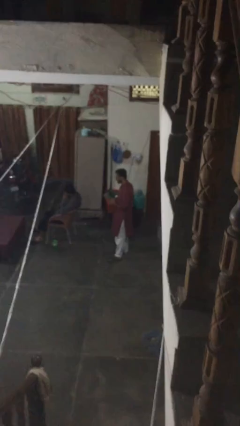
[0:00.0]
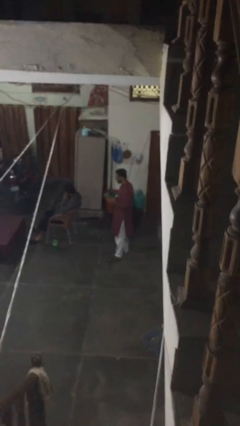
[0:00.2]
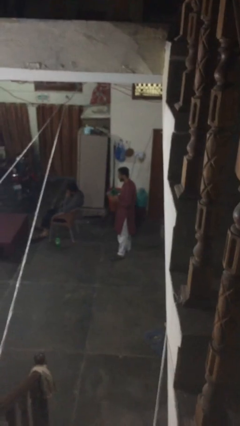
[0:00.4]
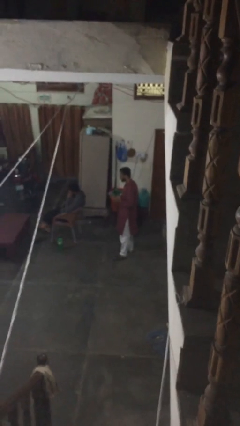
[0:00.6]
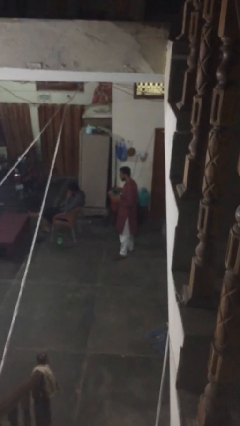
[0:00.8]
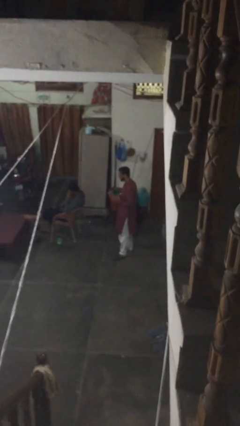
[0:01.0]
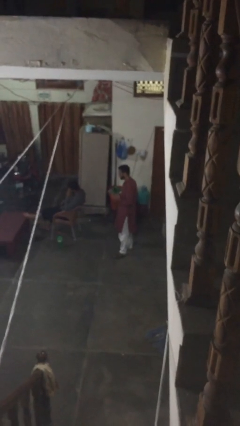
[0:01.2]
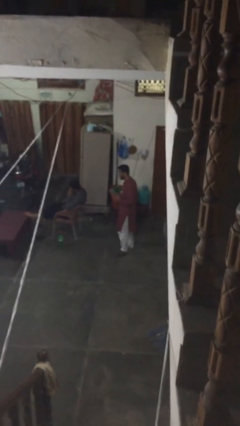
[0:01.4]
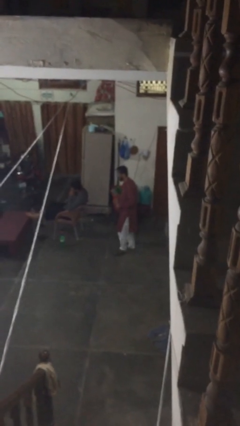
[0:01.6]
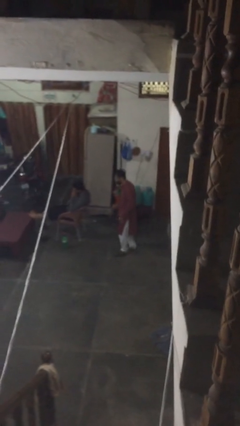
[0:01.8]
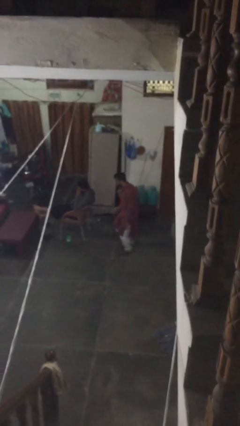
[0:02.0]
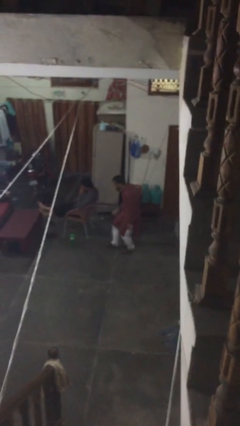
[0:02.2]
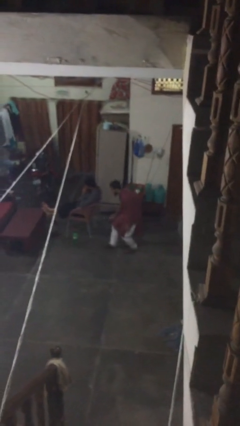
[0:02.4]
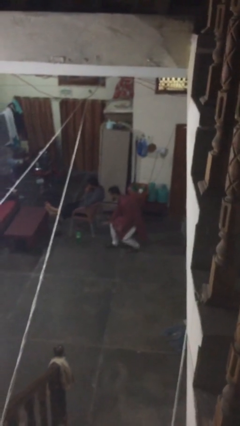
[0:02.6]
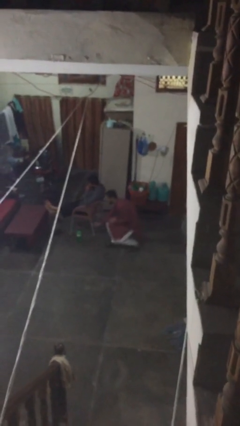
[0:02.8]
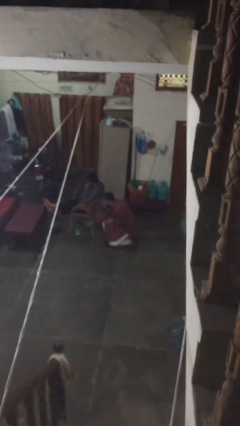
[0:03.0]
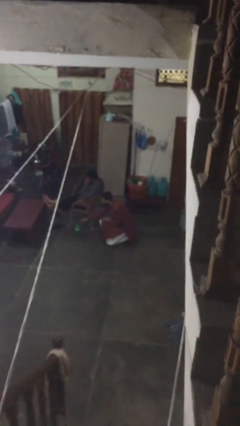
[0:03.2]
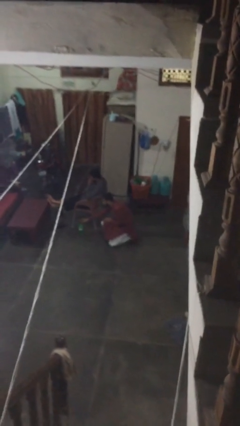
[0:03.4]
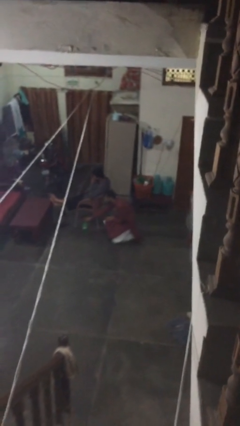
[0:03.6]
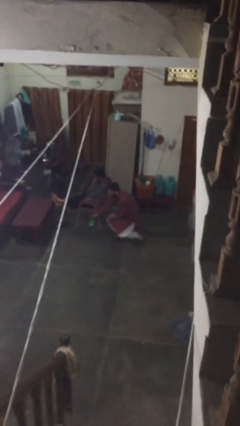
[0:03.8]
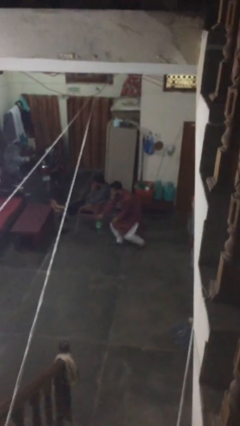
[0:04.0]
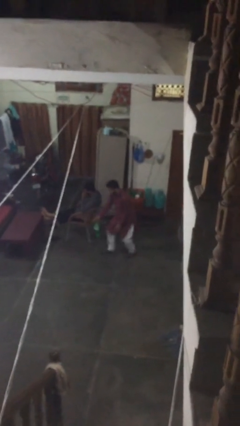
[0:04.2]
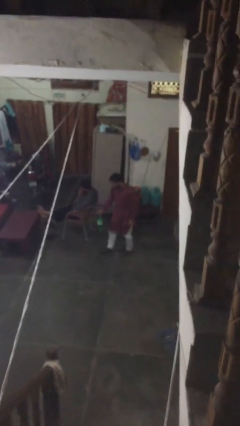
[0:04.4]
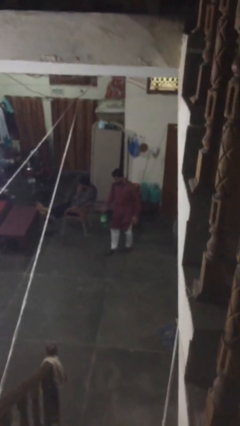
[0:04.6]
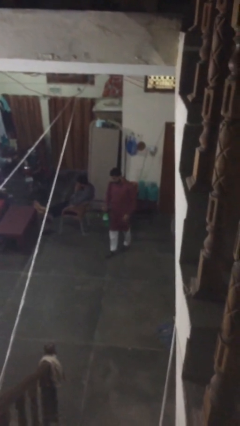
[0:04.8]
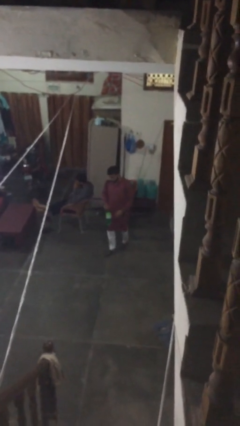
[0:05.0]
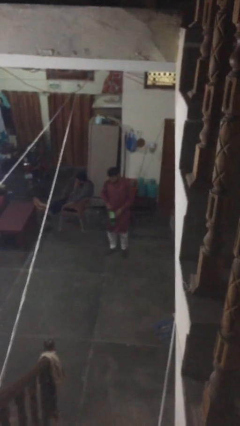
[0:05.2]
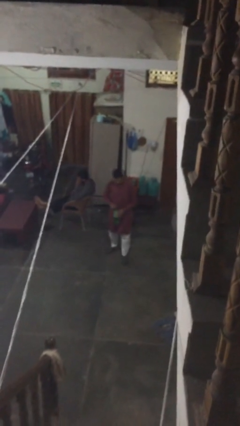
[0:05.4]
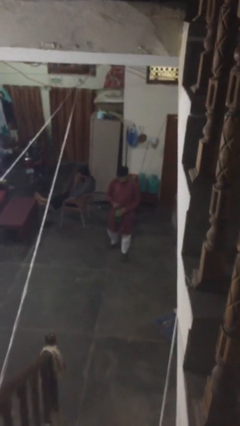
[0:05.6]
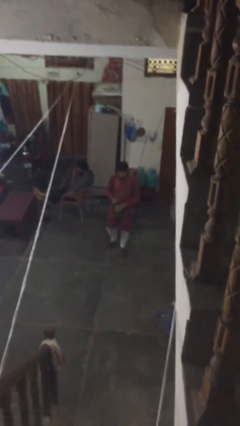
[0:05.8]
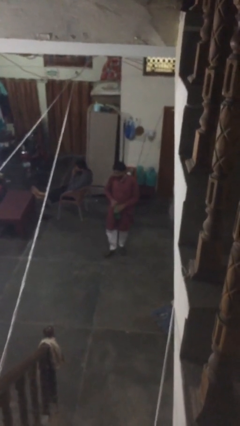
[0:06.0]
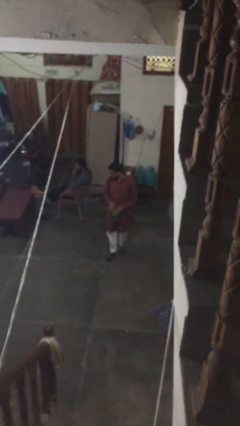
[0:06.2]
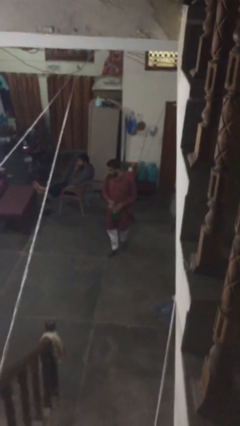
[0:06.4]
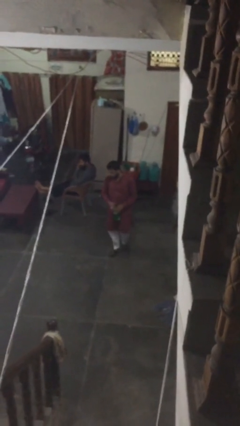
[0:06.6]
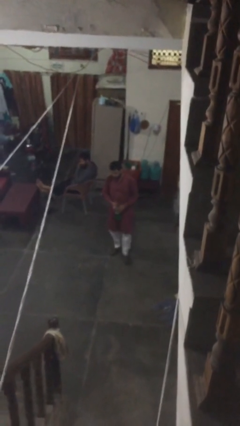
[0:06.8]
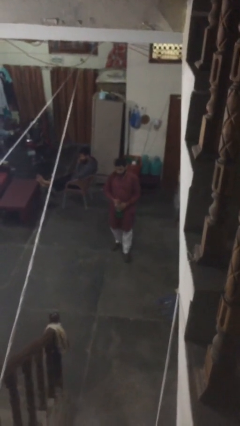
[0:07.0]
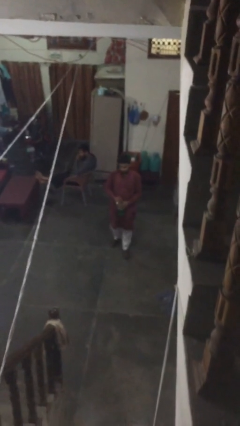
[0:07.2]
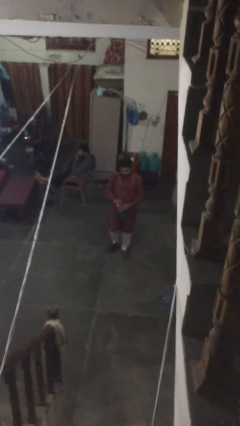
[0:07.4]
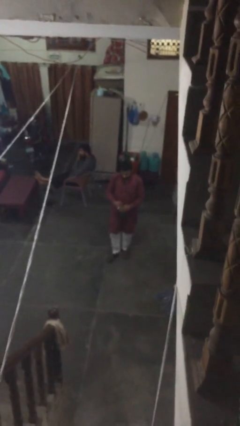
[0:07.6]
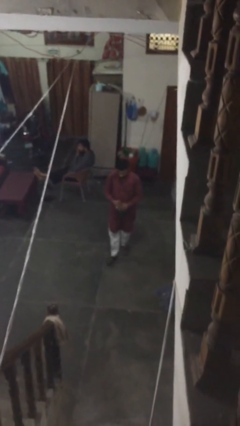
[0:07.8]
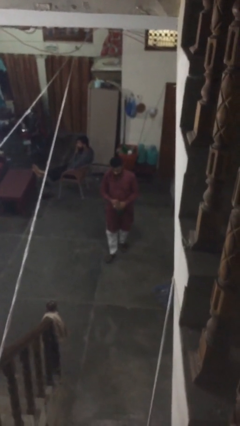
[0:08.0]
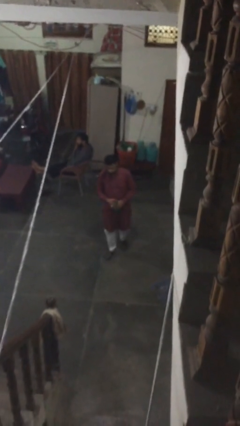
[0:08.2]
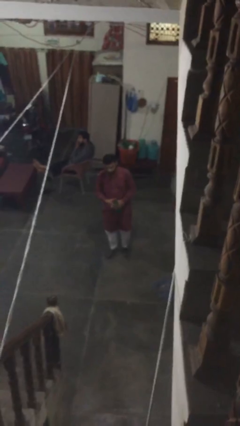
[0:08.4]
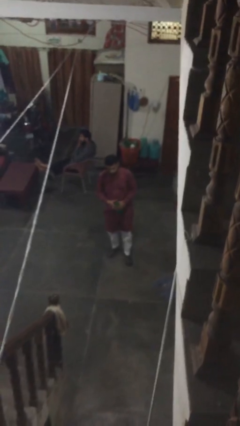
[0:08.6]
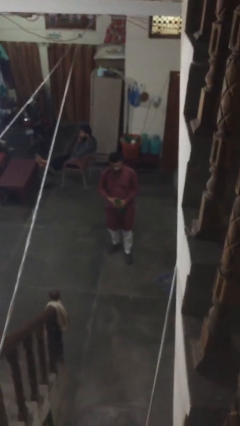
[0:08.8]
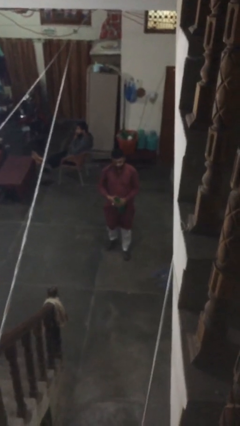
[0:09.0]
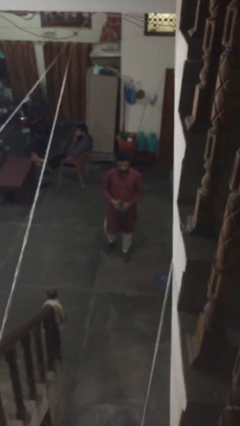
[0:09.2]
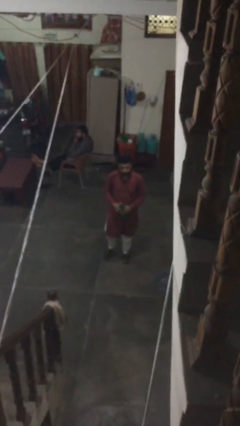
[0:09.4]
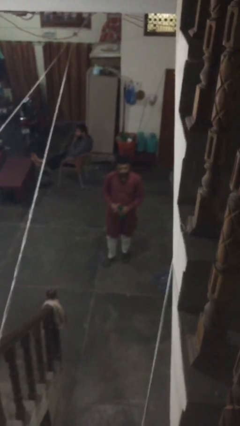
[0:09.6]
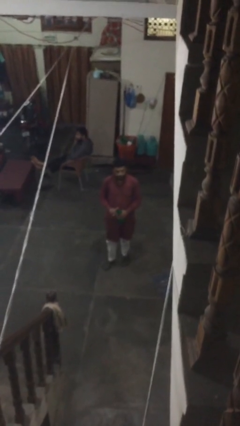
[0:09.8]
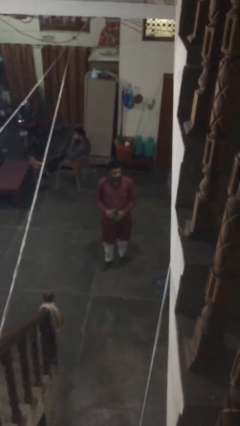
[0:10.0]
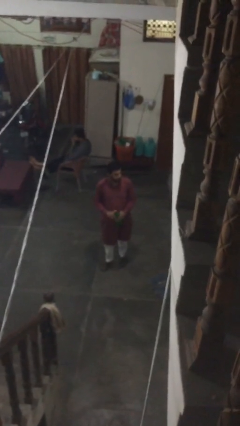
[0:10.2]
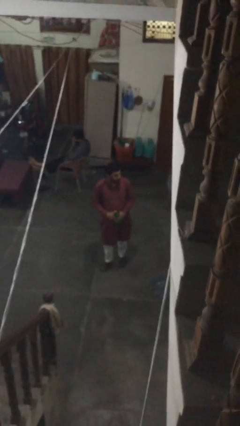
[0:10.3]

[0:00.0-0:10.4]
person steals object from person

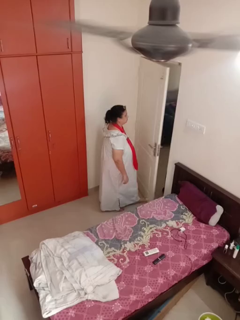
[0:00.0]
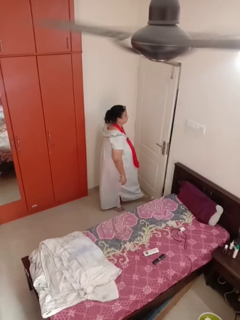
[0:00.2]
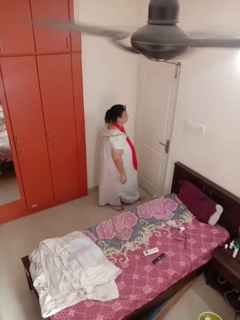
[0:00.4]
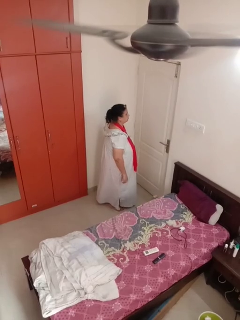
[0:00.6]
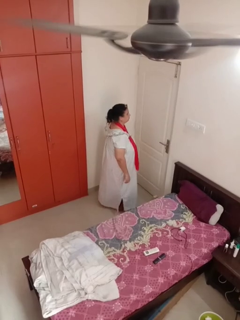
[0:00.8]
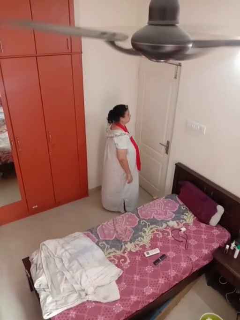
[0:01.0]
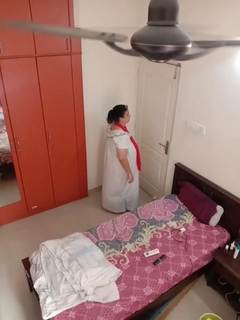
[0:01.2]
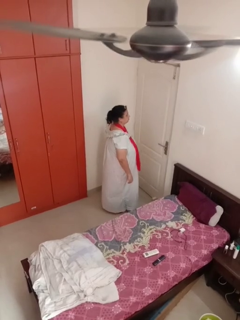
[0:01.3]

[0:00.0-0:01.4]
person closes door with foot

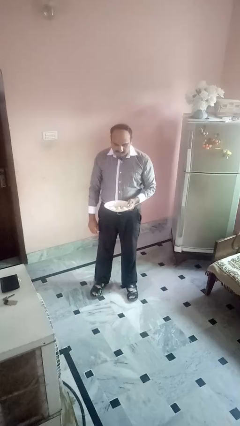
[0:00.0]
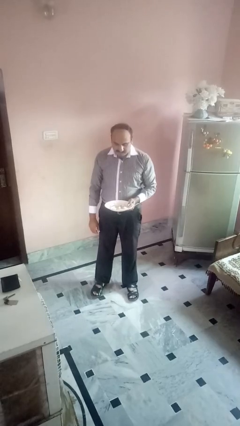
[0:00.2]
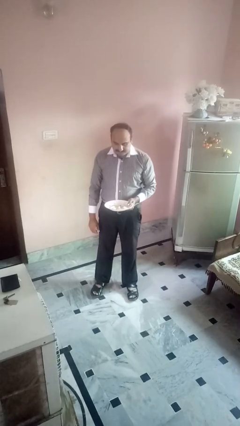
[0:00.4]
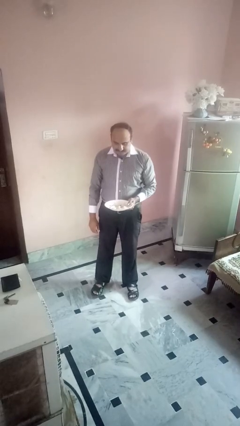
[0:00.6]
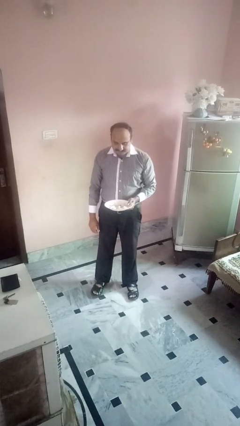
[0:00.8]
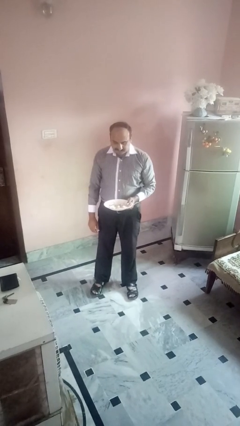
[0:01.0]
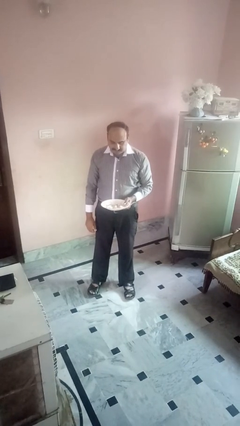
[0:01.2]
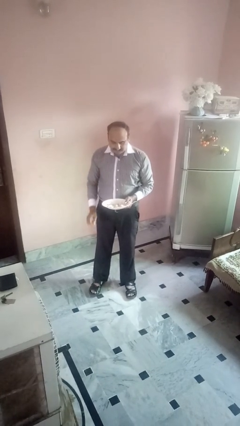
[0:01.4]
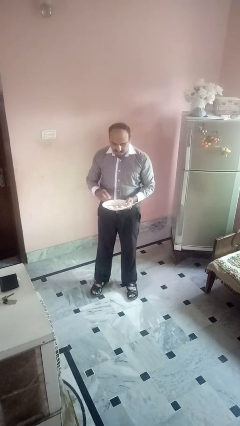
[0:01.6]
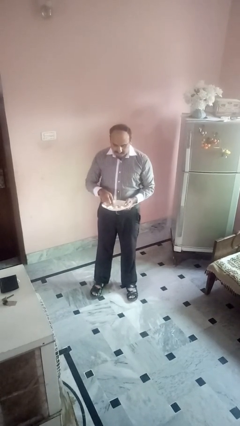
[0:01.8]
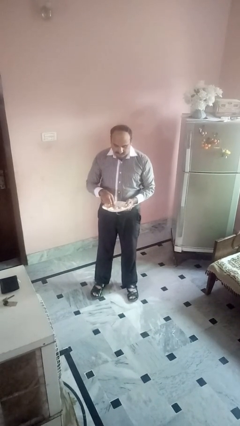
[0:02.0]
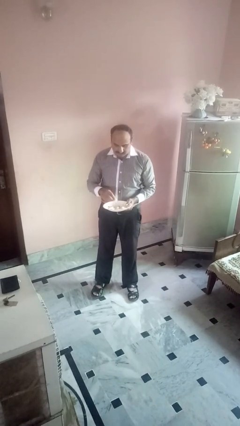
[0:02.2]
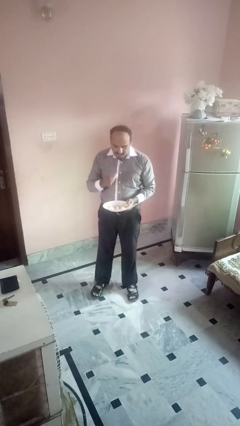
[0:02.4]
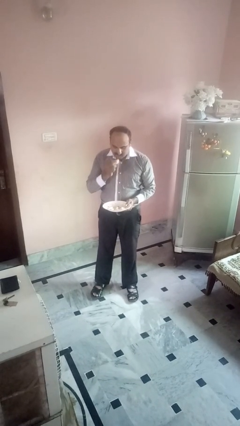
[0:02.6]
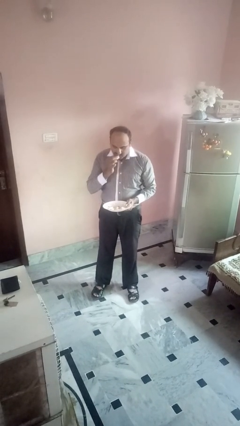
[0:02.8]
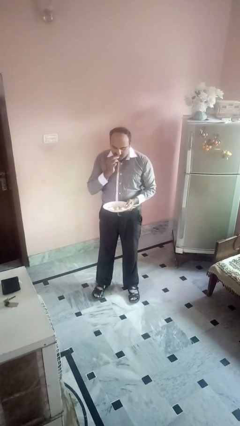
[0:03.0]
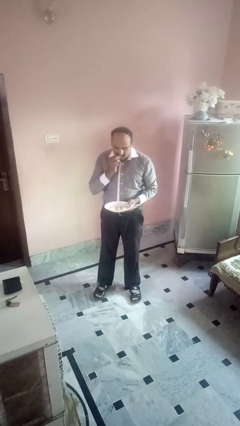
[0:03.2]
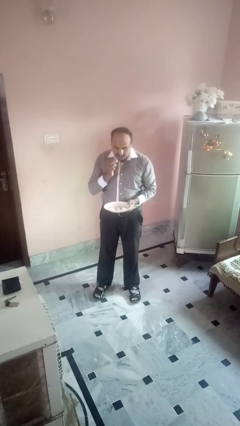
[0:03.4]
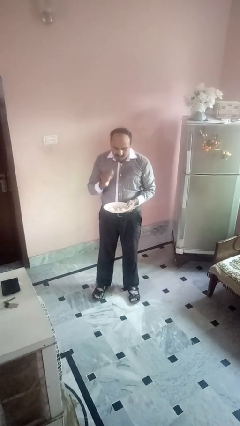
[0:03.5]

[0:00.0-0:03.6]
person eats with hands

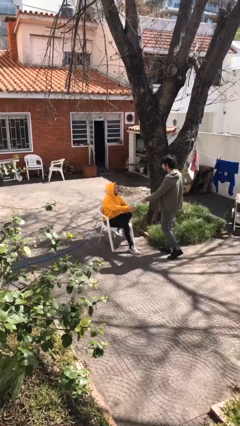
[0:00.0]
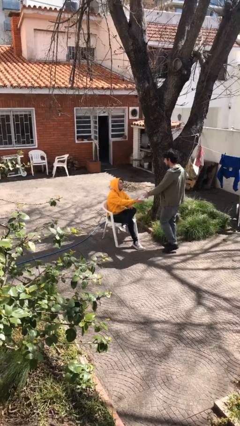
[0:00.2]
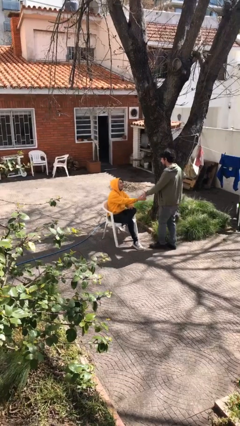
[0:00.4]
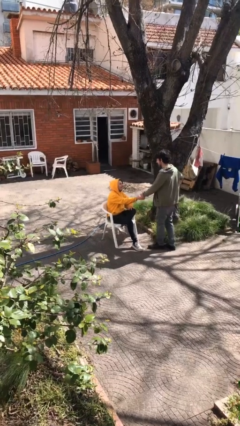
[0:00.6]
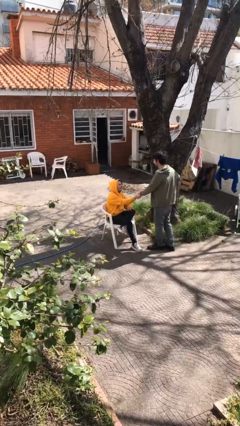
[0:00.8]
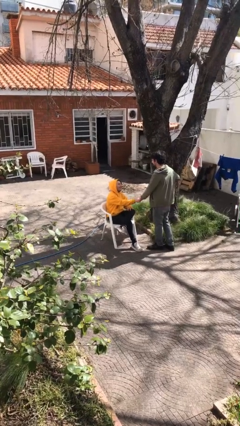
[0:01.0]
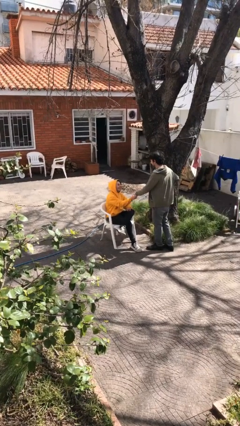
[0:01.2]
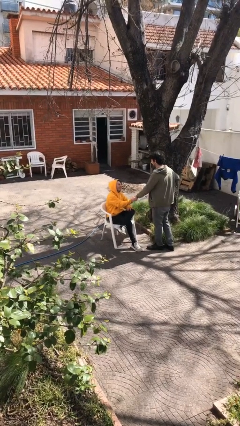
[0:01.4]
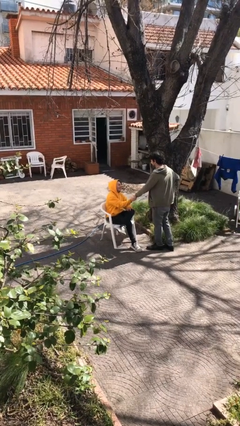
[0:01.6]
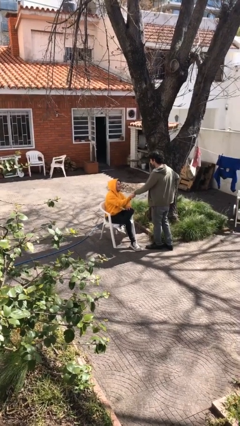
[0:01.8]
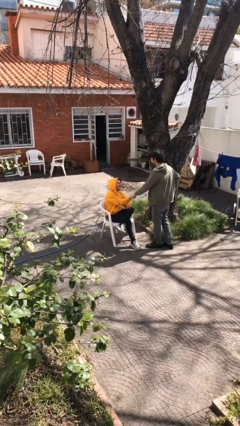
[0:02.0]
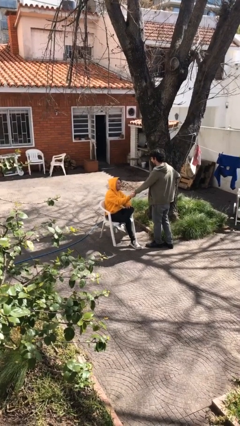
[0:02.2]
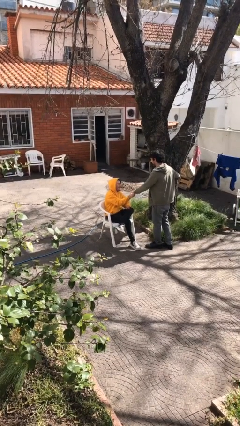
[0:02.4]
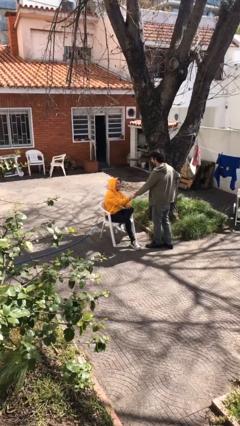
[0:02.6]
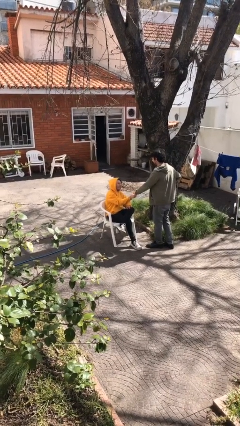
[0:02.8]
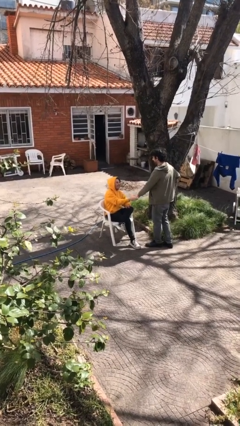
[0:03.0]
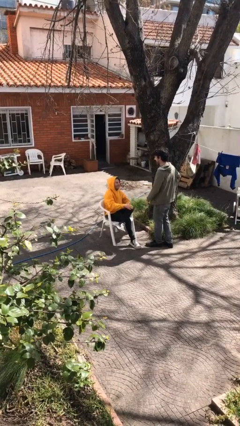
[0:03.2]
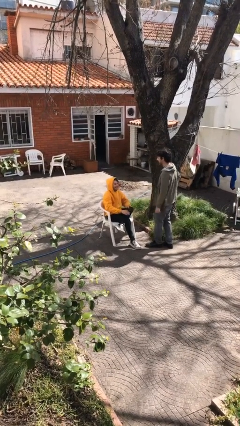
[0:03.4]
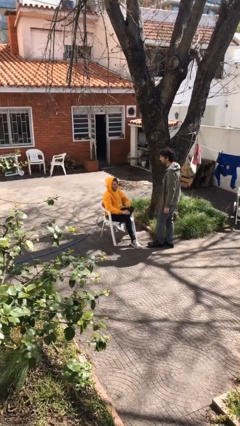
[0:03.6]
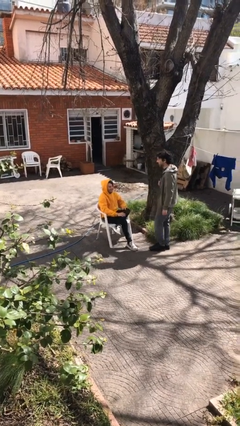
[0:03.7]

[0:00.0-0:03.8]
person shakes hand
